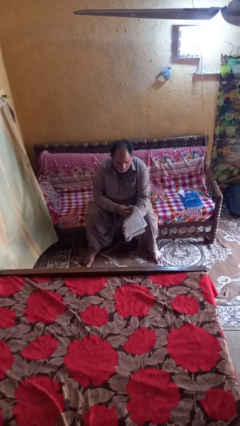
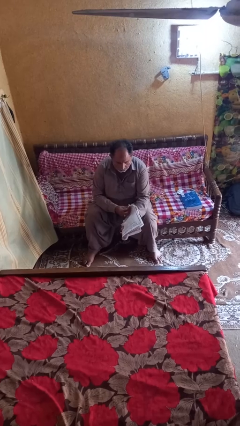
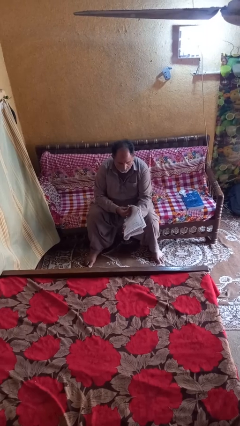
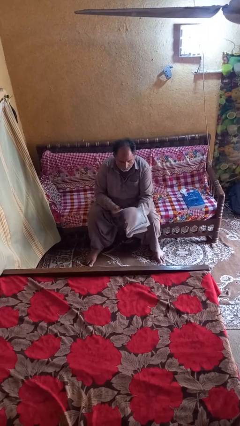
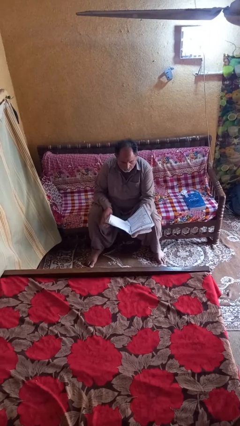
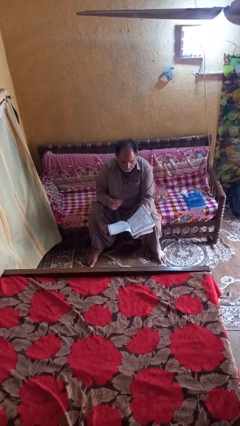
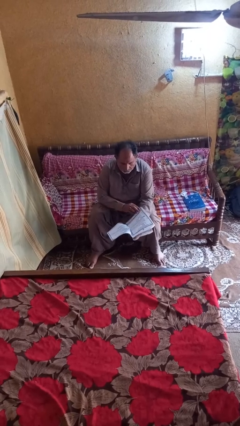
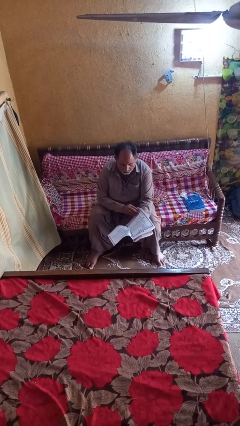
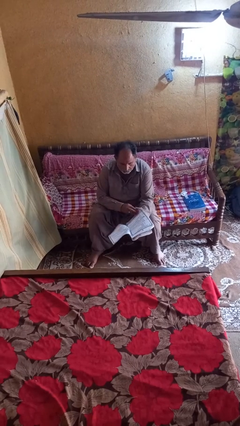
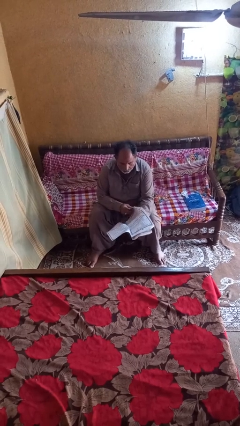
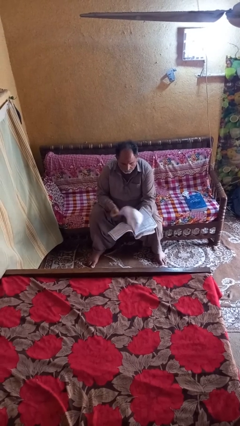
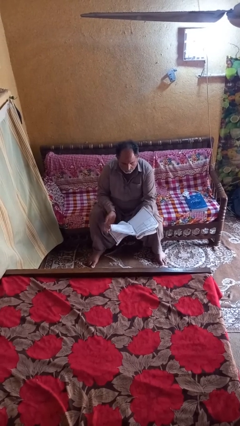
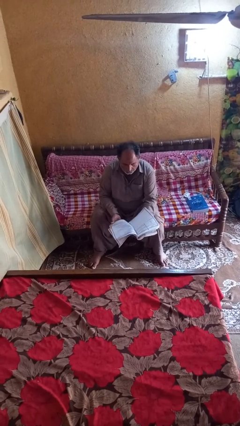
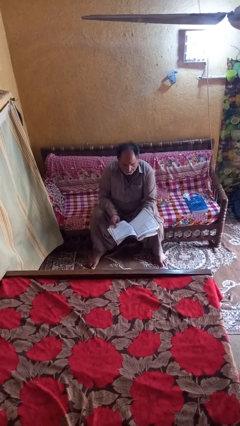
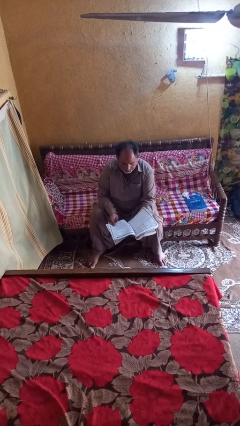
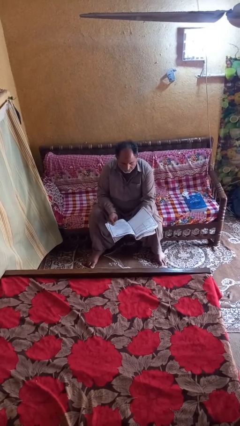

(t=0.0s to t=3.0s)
person reads magazine

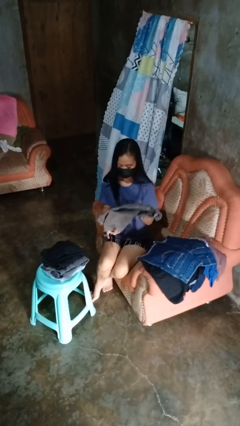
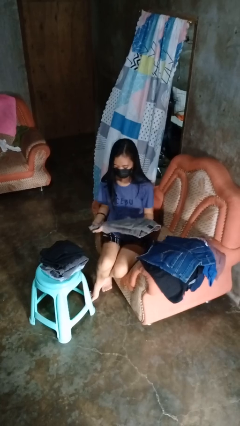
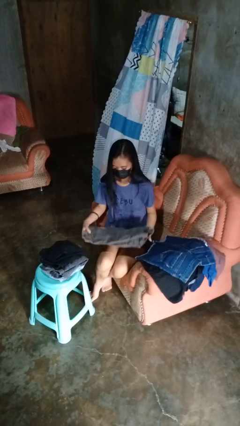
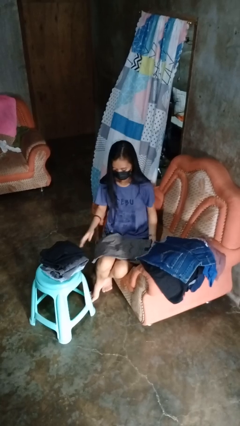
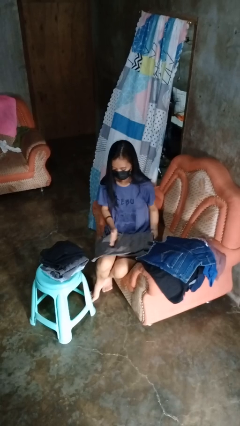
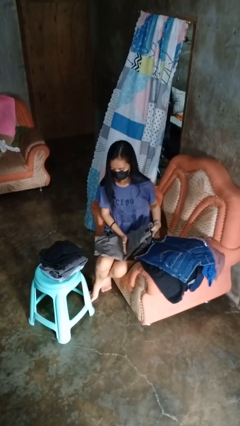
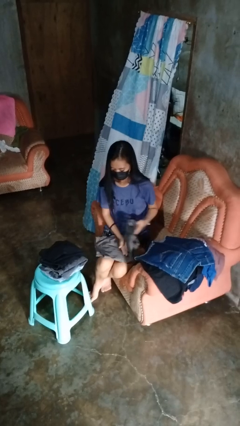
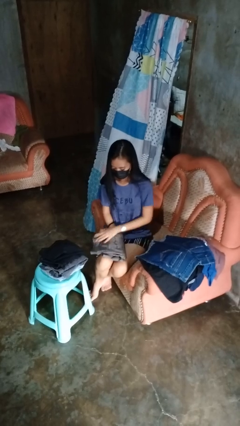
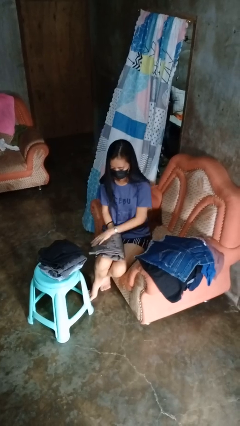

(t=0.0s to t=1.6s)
person folds pants

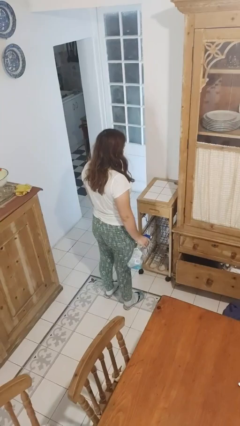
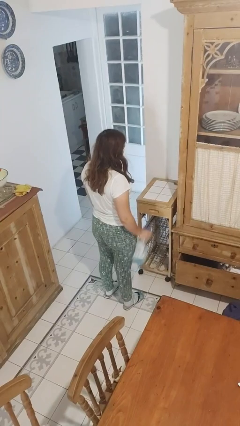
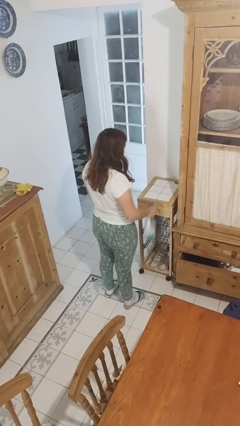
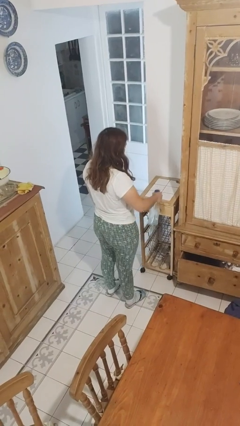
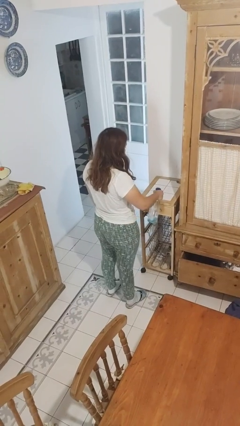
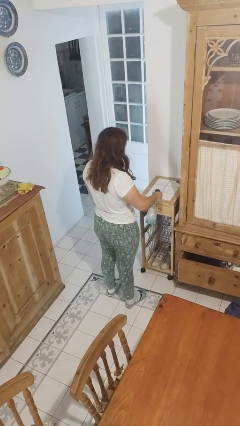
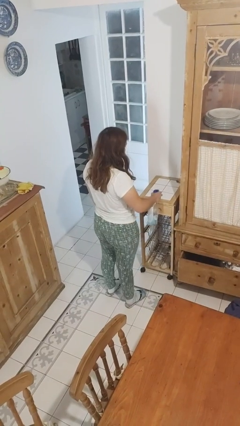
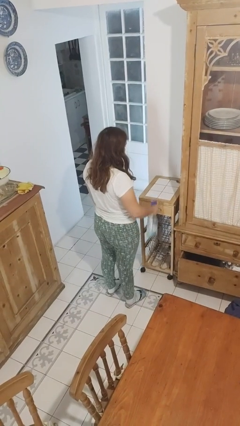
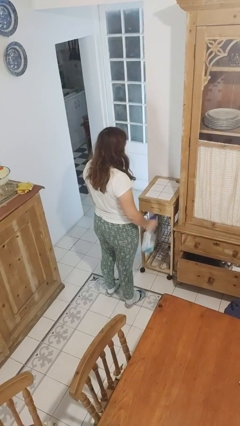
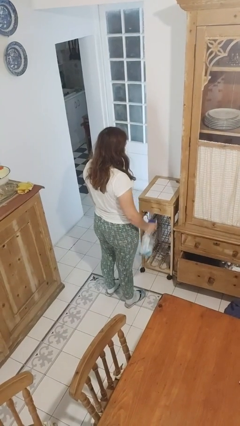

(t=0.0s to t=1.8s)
person sprays from bottle

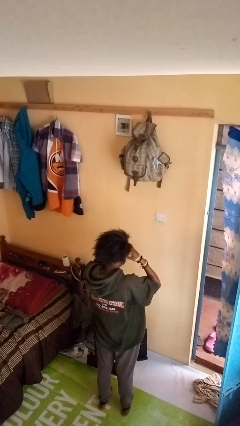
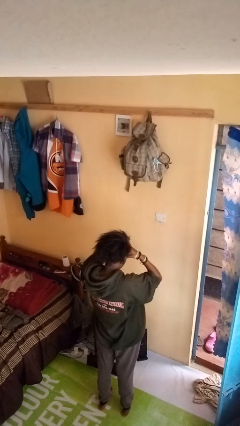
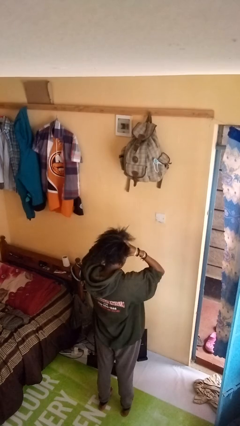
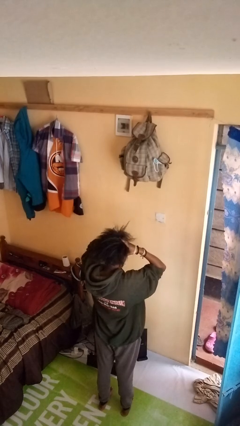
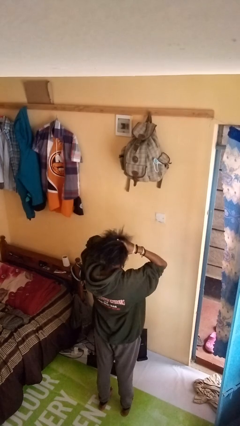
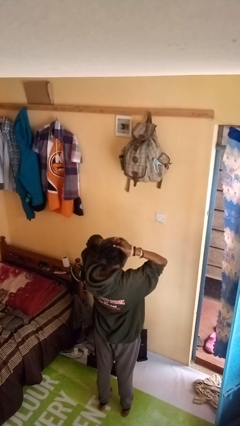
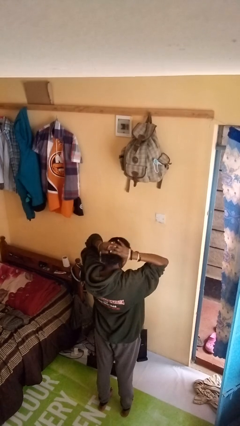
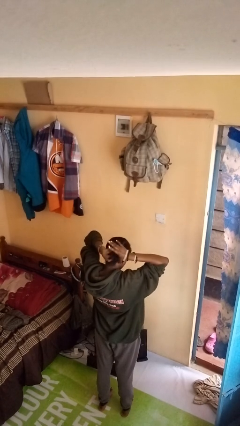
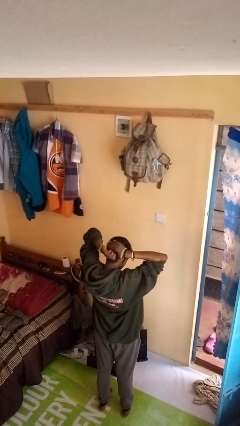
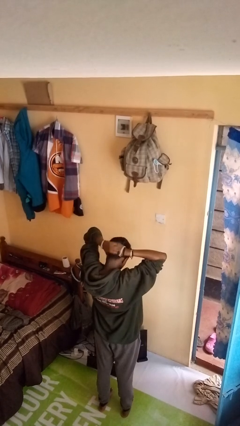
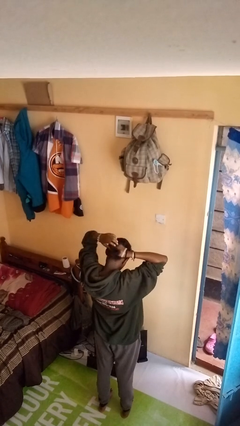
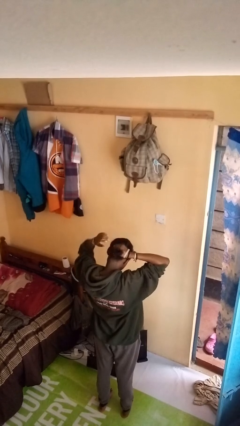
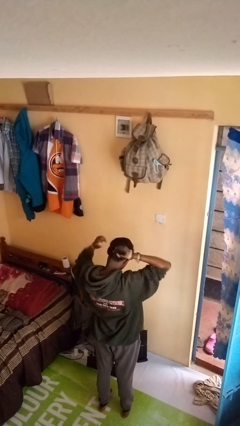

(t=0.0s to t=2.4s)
person strokes hair

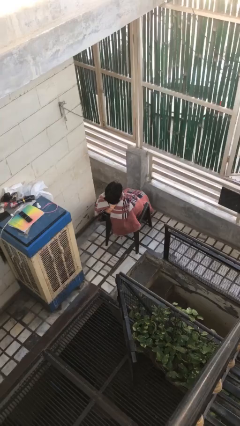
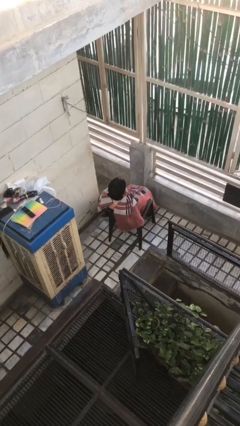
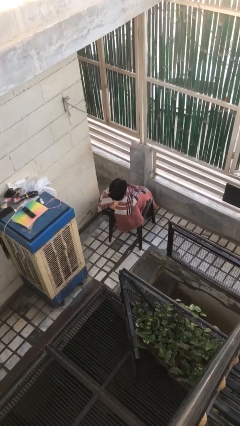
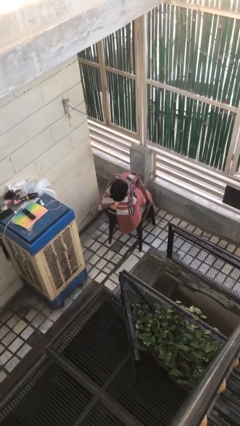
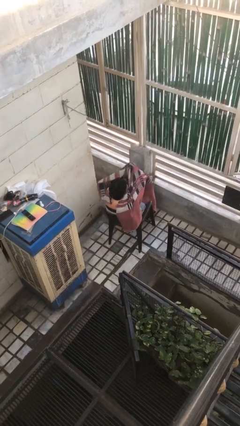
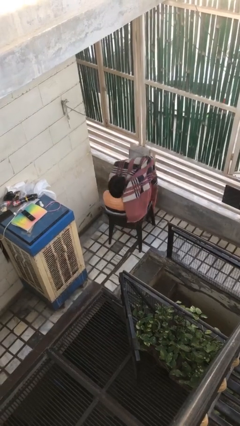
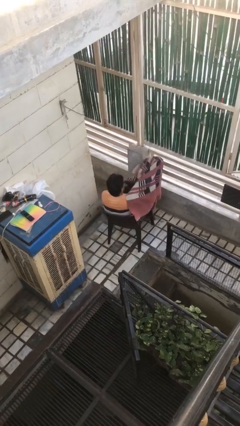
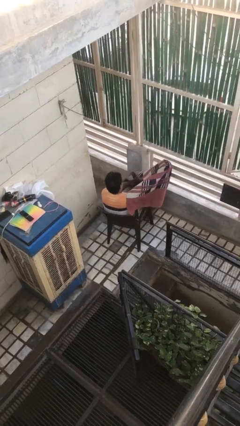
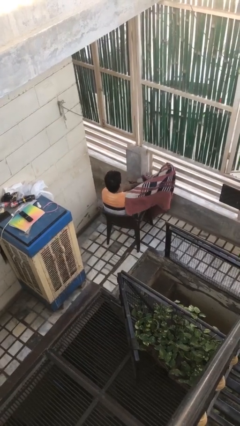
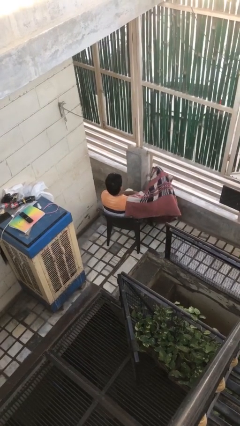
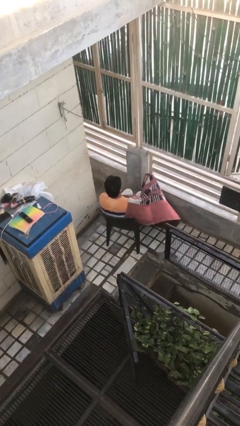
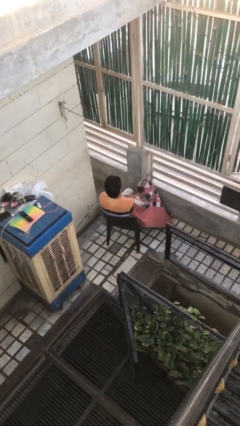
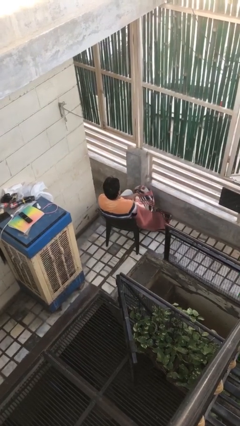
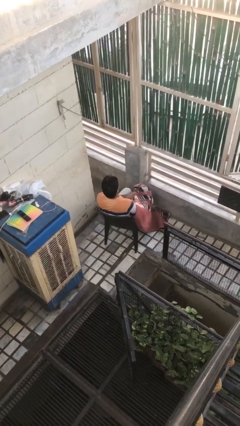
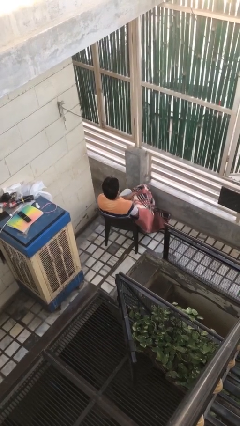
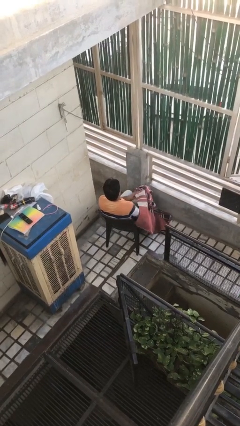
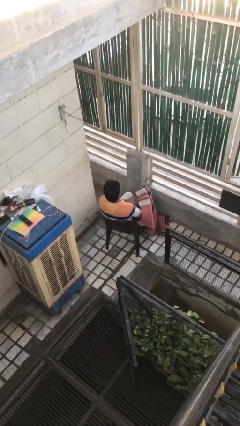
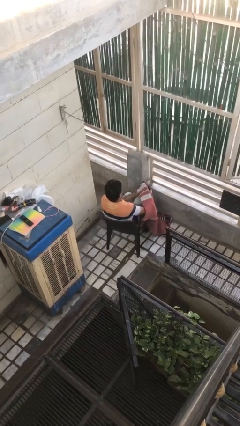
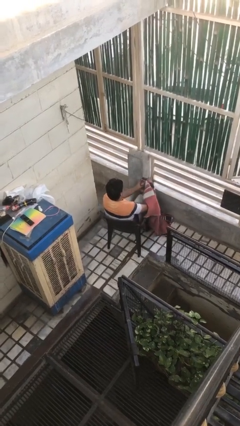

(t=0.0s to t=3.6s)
person uncovers with blanket

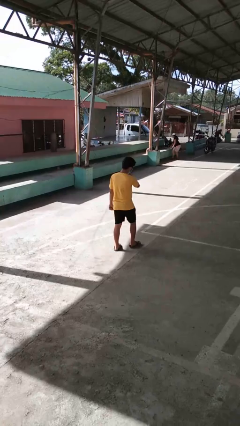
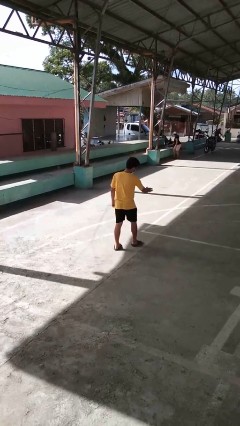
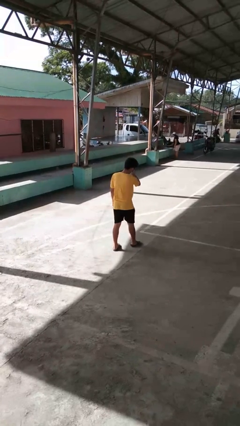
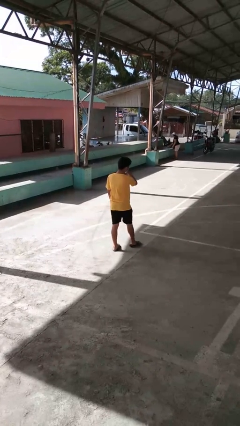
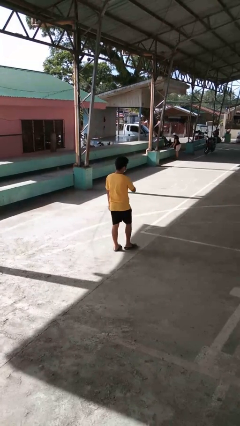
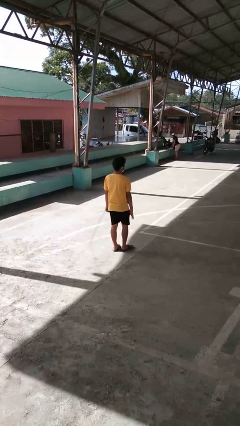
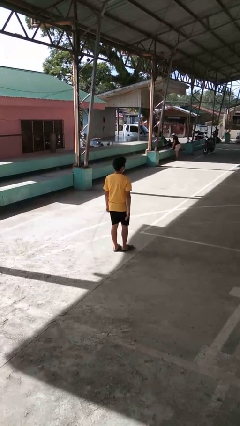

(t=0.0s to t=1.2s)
person karate chop

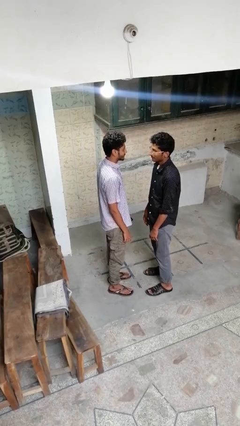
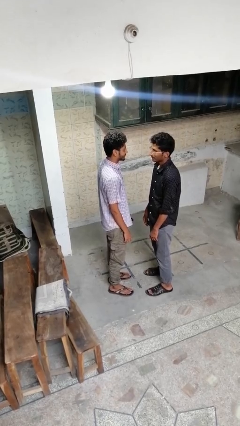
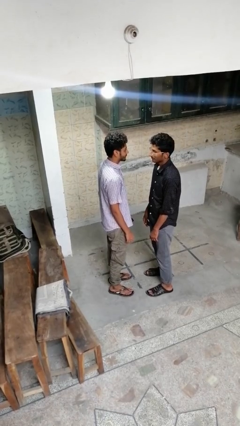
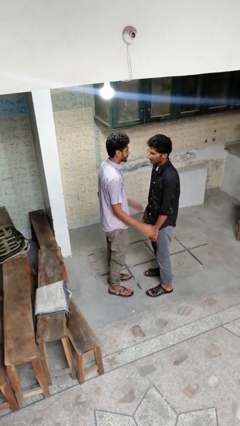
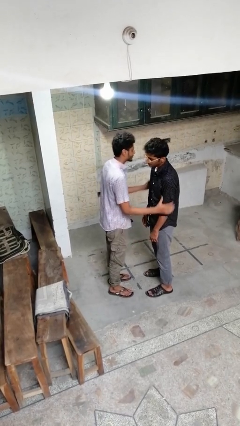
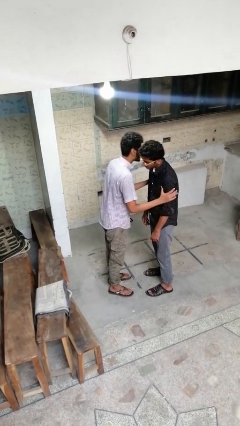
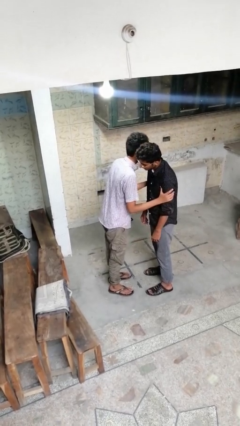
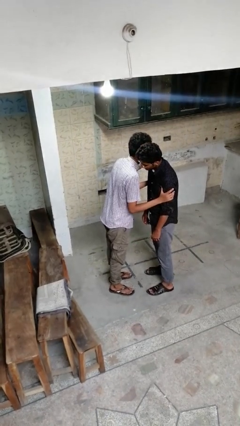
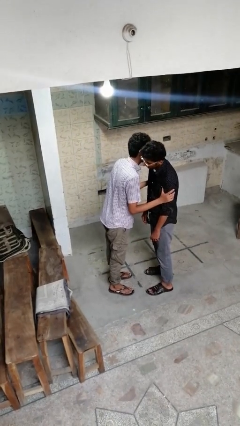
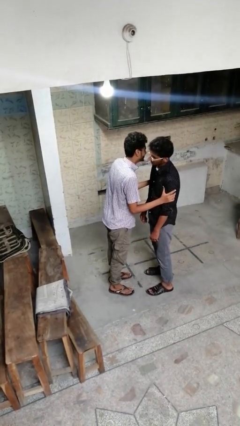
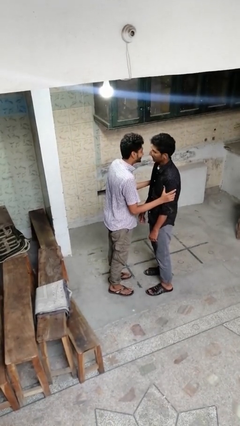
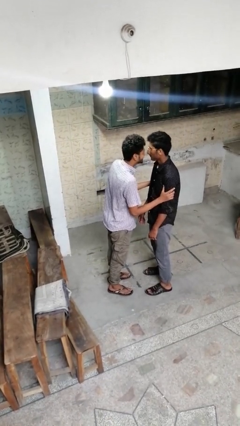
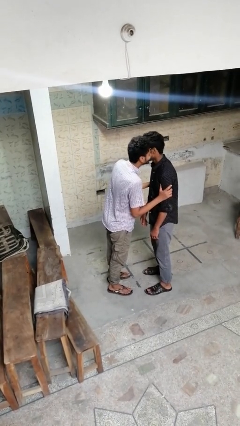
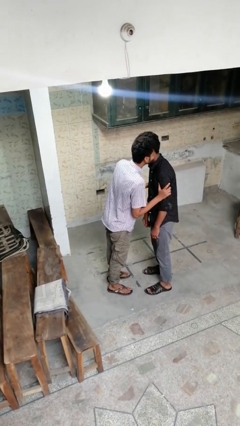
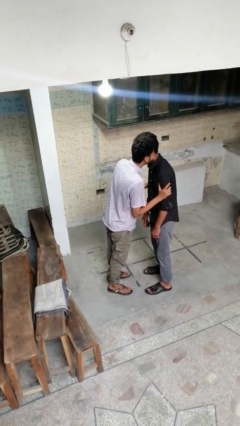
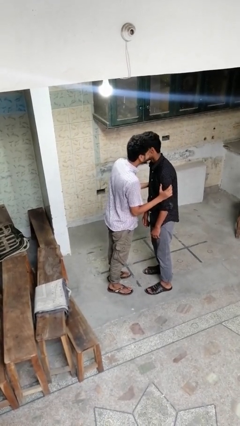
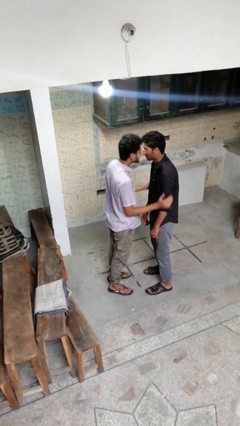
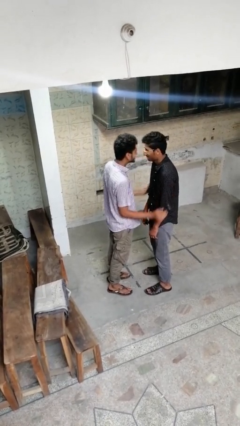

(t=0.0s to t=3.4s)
person kisses cheek of person

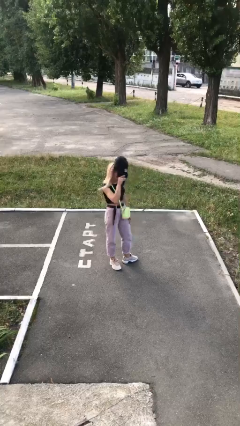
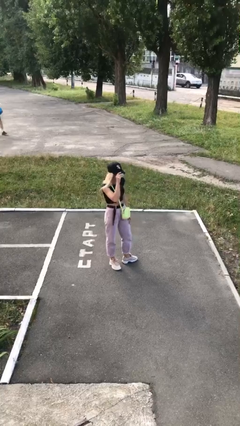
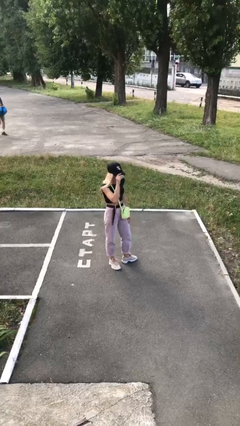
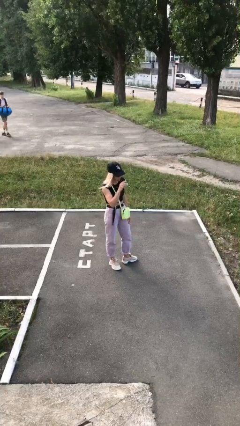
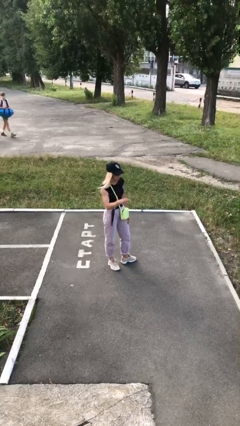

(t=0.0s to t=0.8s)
person puts on hat
